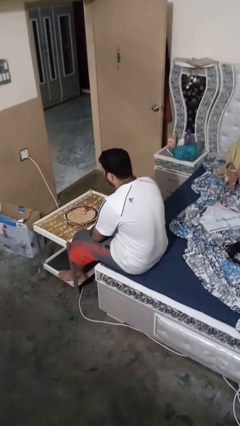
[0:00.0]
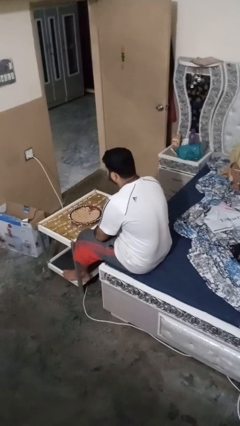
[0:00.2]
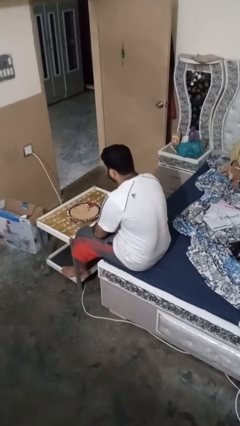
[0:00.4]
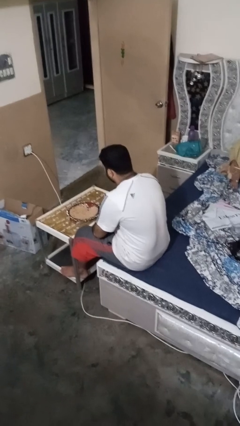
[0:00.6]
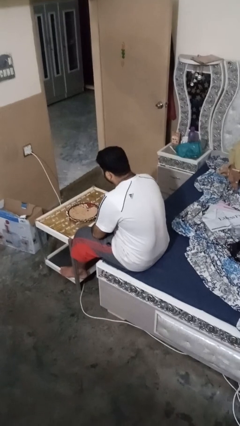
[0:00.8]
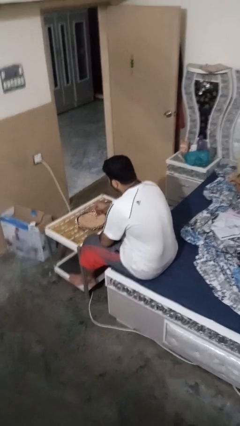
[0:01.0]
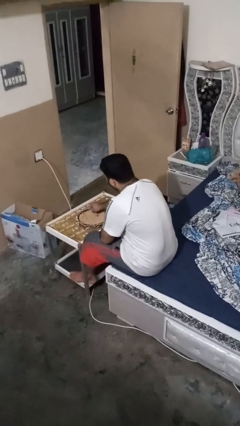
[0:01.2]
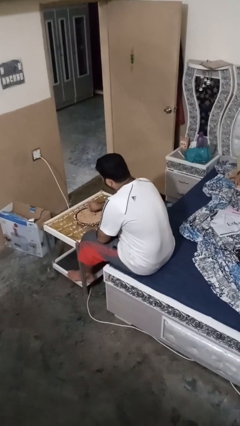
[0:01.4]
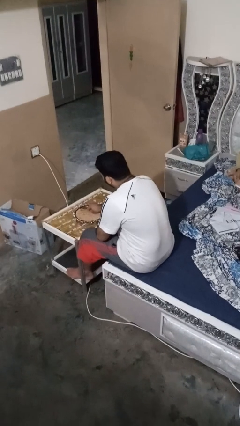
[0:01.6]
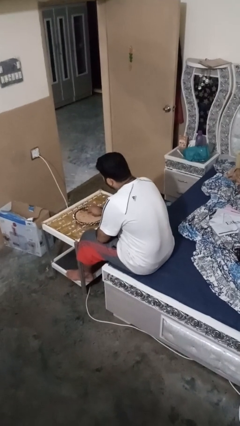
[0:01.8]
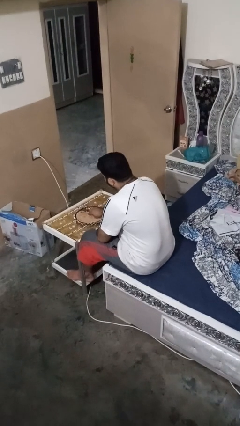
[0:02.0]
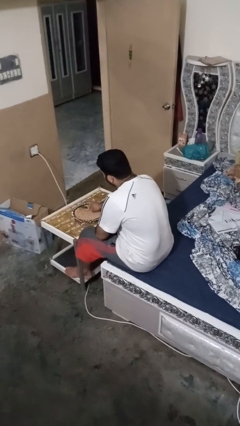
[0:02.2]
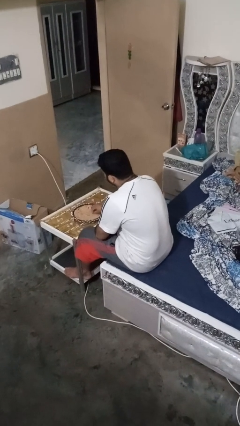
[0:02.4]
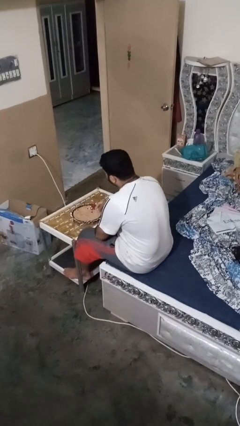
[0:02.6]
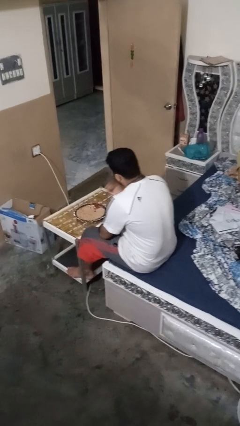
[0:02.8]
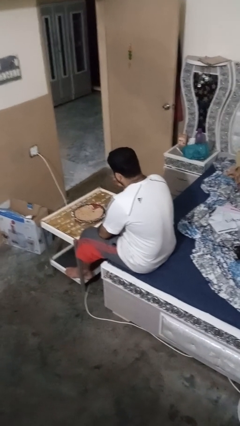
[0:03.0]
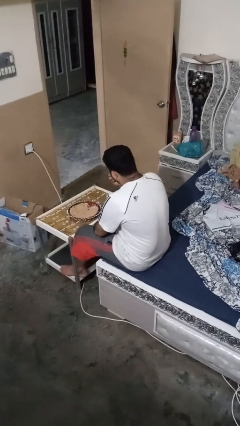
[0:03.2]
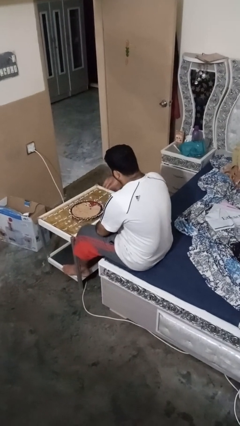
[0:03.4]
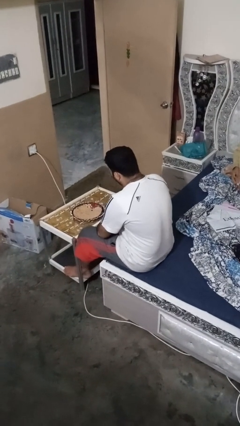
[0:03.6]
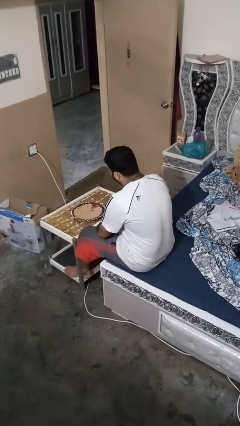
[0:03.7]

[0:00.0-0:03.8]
person eats with hands

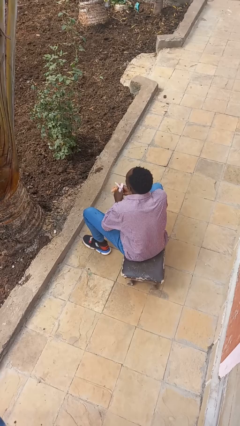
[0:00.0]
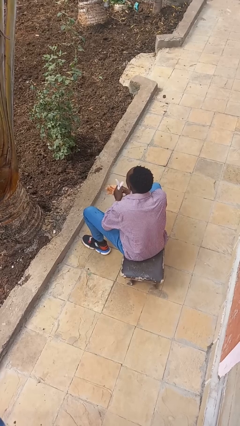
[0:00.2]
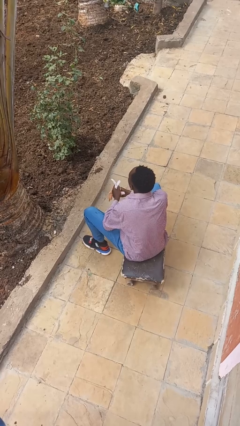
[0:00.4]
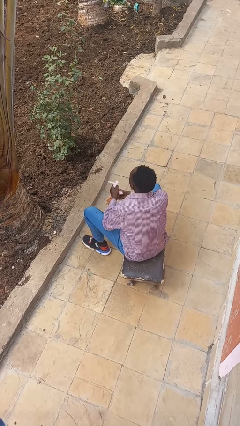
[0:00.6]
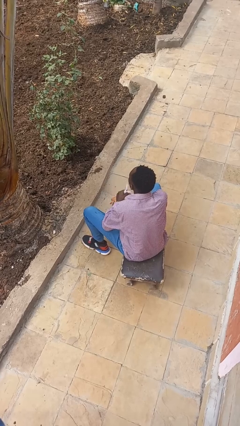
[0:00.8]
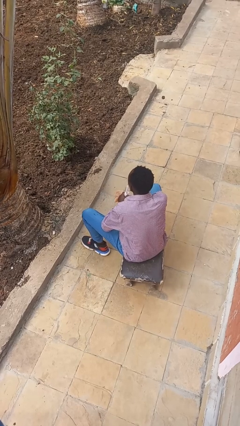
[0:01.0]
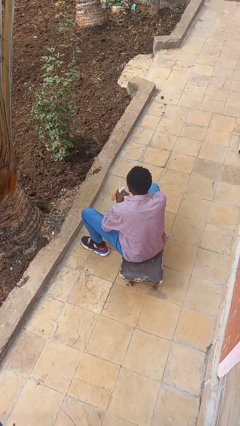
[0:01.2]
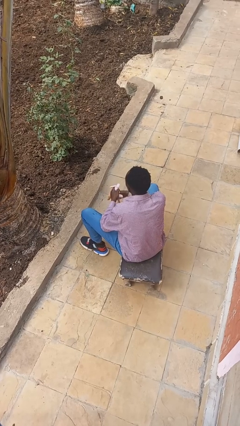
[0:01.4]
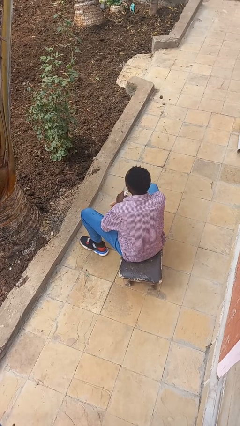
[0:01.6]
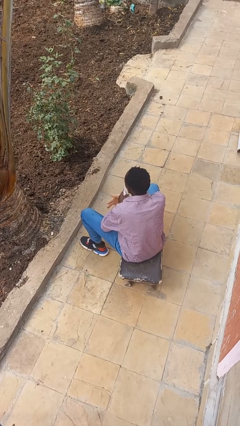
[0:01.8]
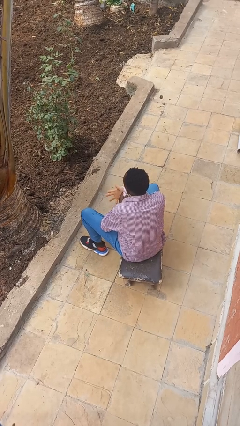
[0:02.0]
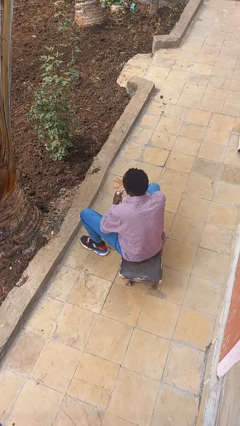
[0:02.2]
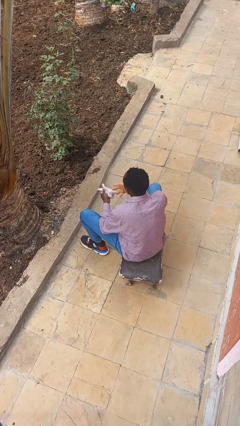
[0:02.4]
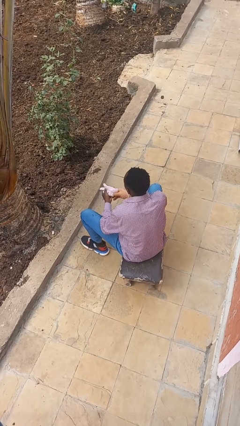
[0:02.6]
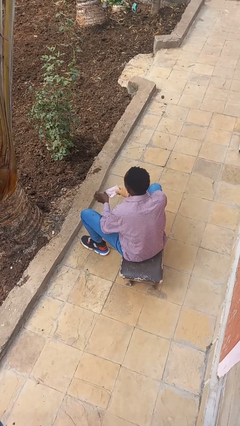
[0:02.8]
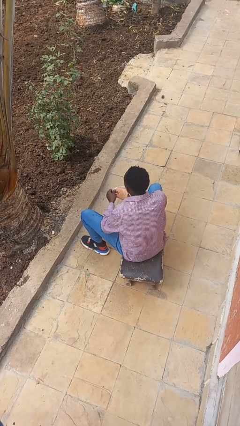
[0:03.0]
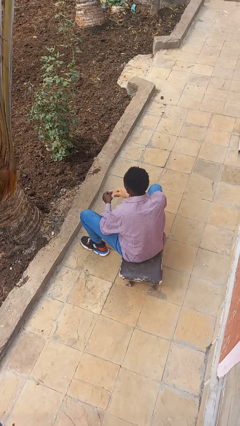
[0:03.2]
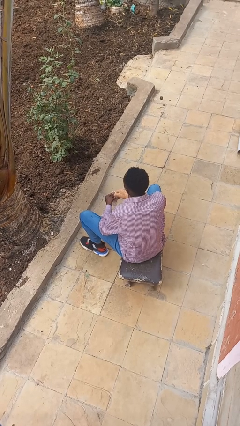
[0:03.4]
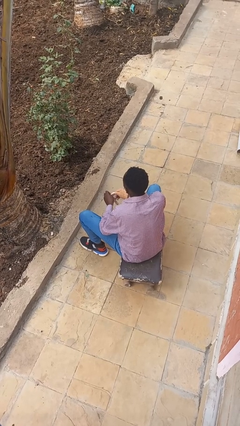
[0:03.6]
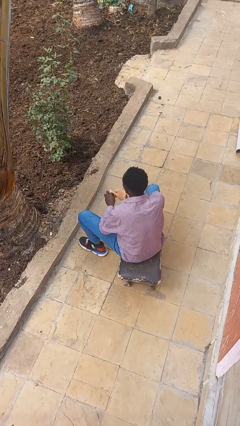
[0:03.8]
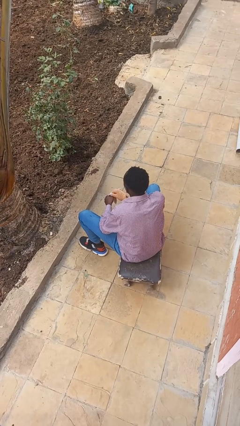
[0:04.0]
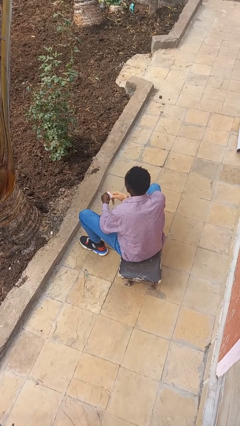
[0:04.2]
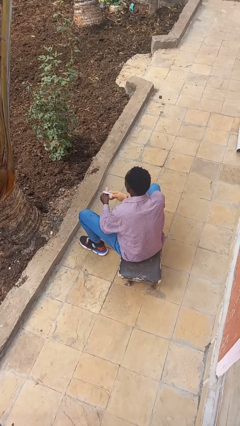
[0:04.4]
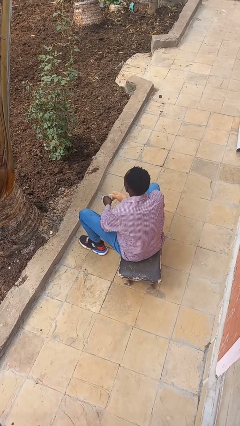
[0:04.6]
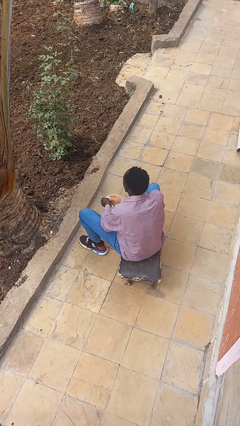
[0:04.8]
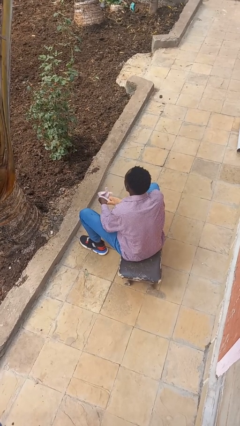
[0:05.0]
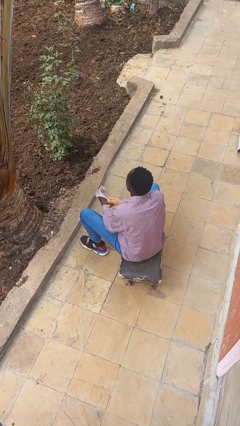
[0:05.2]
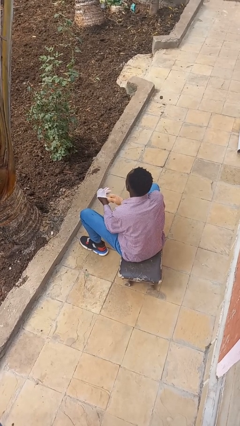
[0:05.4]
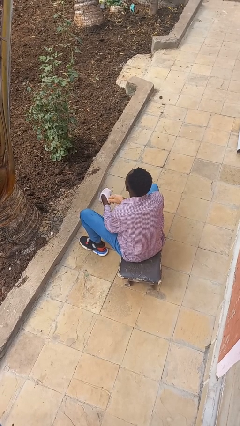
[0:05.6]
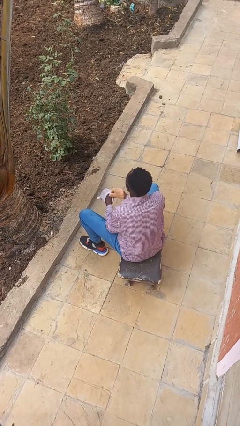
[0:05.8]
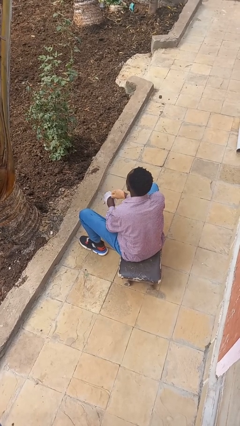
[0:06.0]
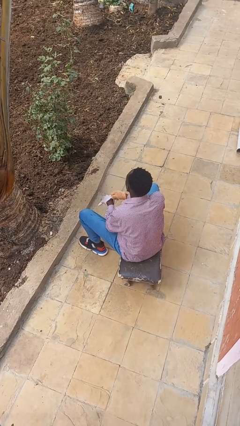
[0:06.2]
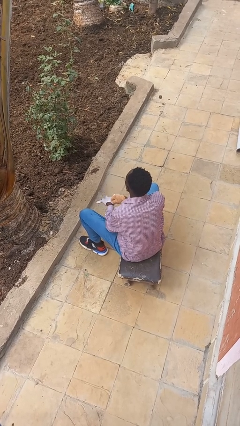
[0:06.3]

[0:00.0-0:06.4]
person puts on gloves

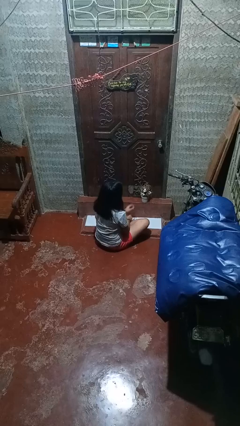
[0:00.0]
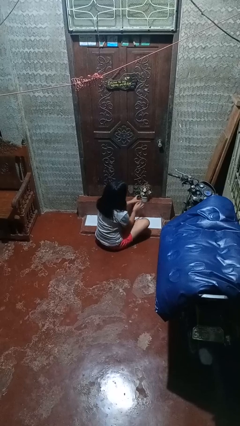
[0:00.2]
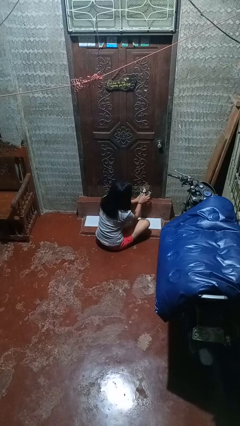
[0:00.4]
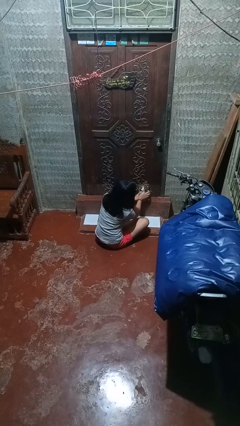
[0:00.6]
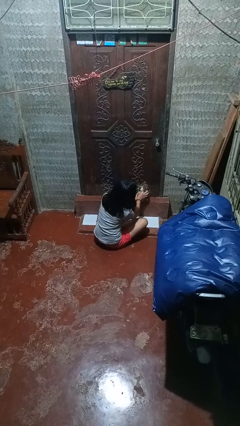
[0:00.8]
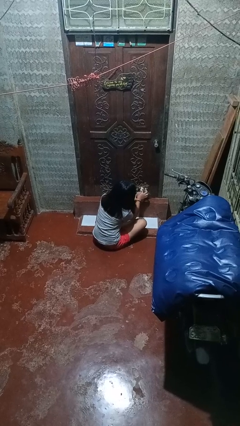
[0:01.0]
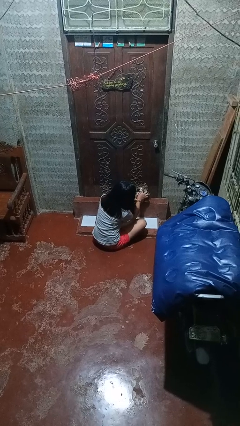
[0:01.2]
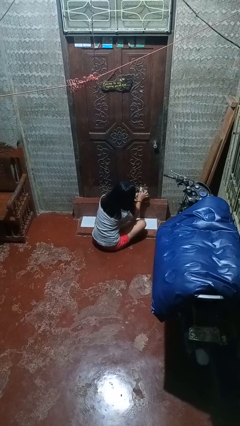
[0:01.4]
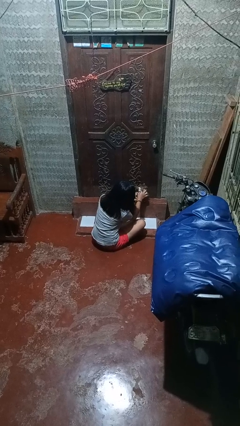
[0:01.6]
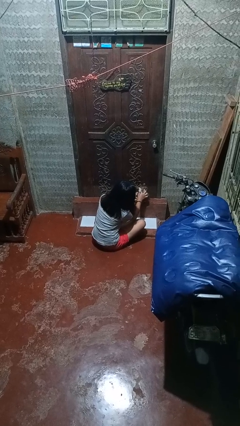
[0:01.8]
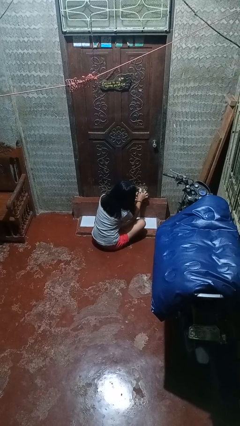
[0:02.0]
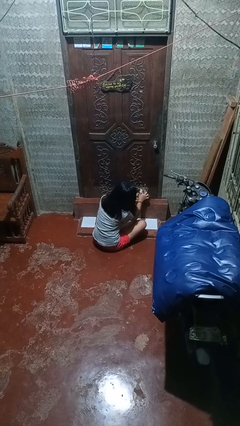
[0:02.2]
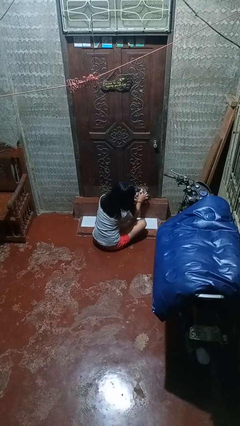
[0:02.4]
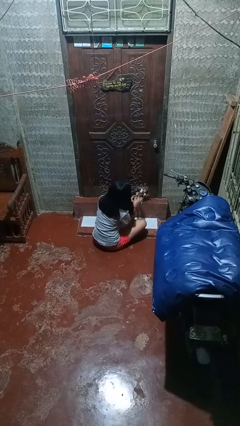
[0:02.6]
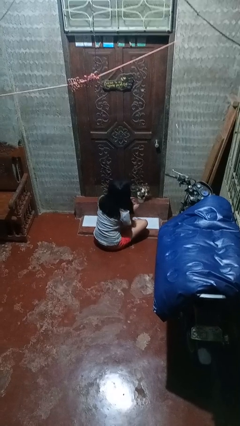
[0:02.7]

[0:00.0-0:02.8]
person arranges flowers in vase

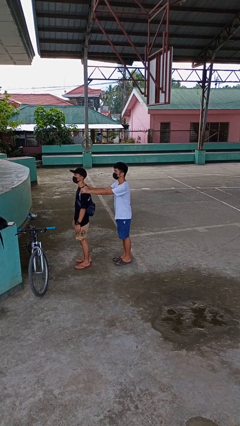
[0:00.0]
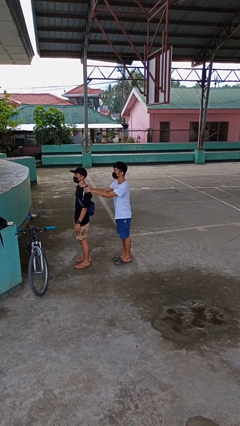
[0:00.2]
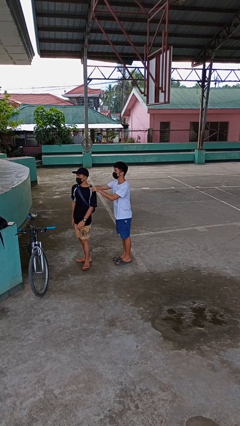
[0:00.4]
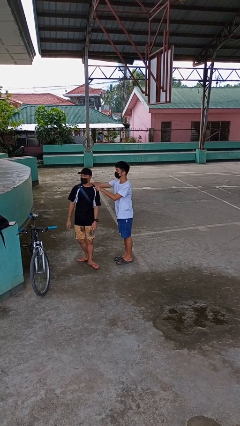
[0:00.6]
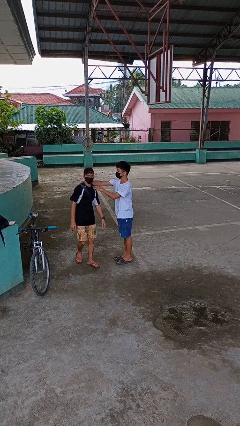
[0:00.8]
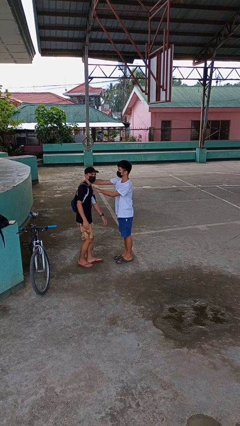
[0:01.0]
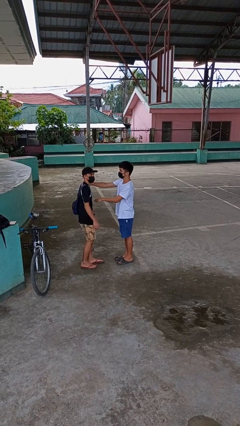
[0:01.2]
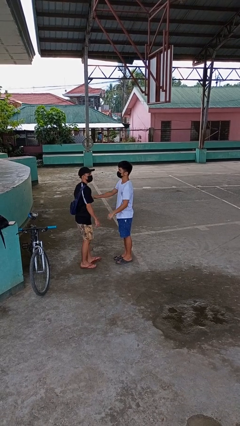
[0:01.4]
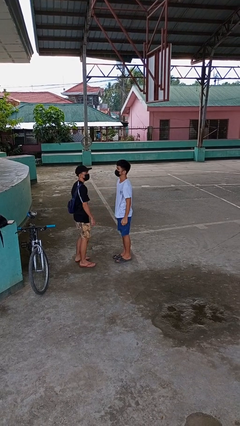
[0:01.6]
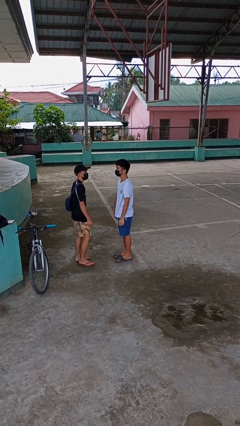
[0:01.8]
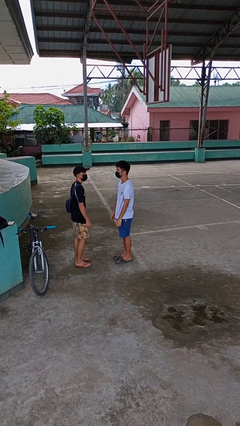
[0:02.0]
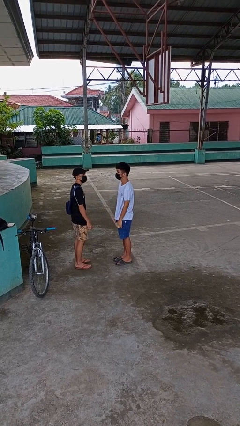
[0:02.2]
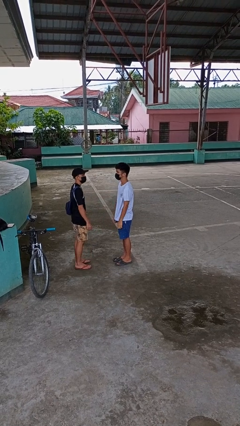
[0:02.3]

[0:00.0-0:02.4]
person spins person around

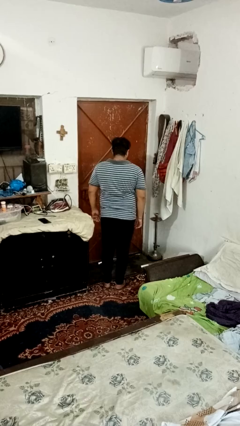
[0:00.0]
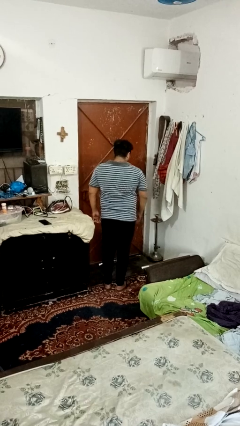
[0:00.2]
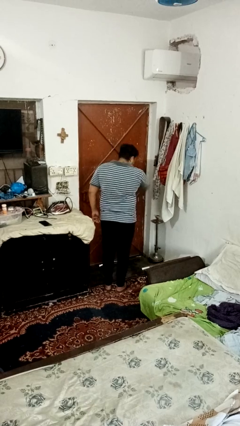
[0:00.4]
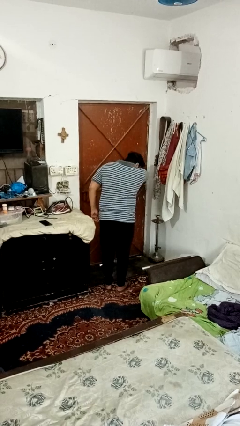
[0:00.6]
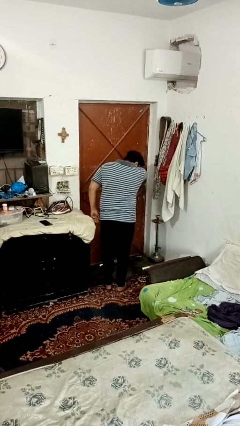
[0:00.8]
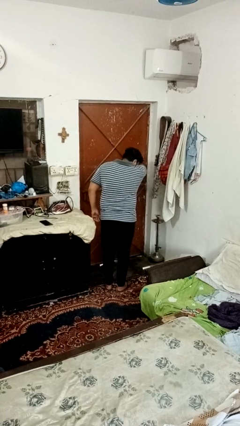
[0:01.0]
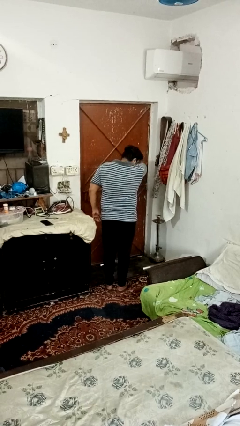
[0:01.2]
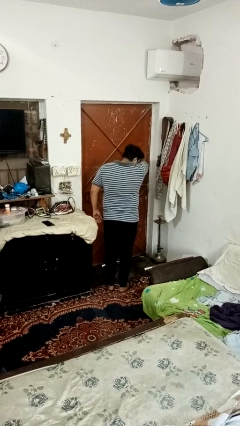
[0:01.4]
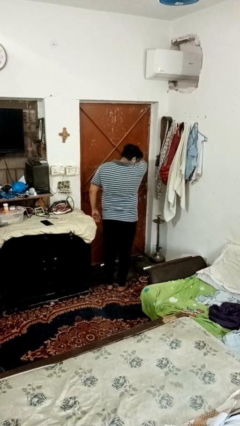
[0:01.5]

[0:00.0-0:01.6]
person sneezes into arm

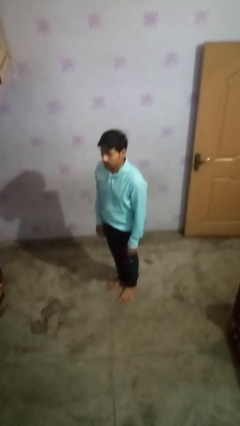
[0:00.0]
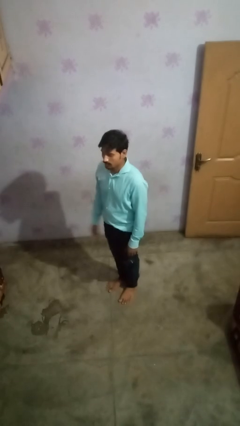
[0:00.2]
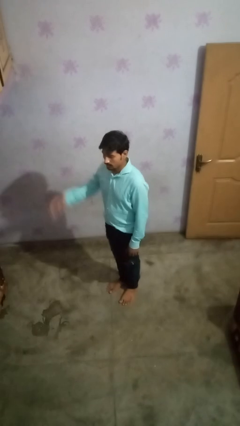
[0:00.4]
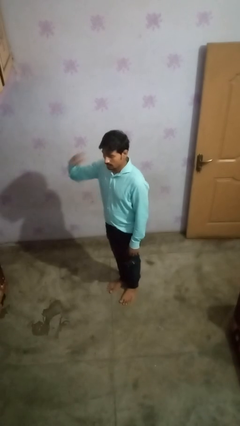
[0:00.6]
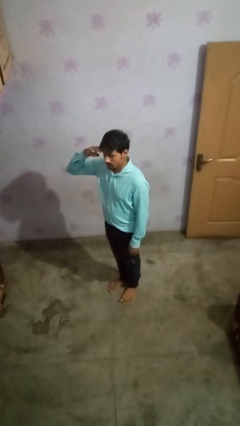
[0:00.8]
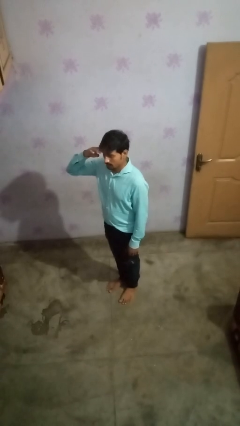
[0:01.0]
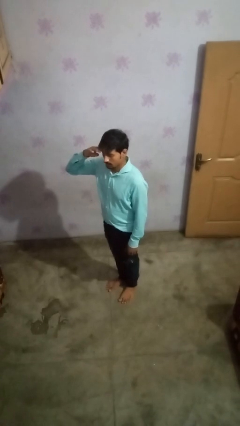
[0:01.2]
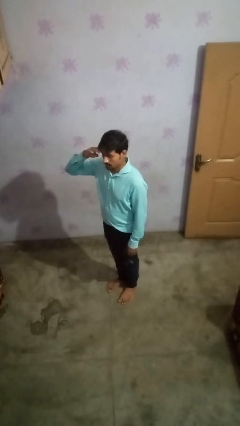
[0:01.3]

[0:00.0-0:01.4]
person salutes
